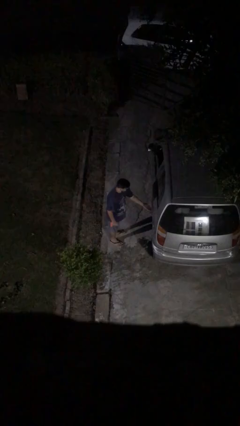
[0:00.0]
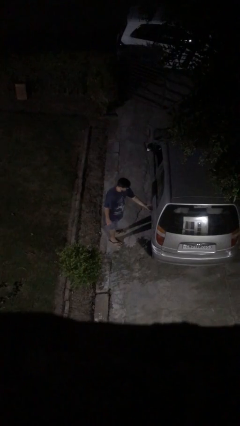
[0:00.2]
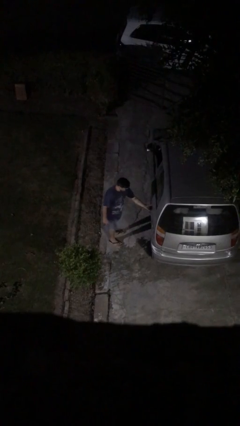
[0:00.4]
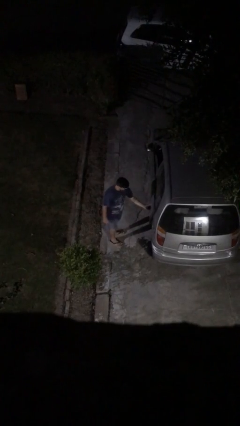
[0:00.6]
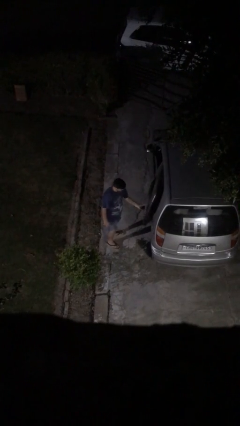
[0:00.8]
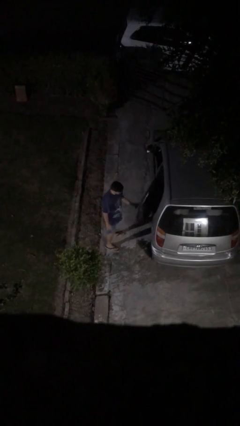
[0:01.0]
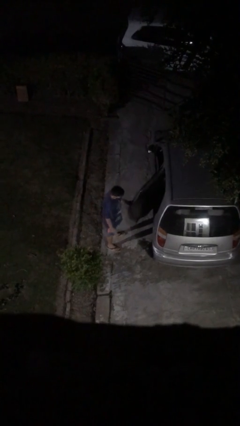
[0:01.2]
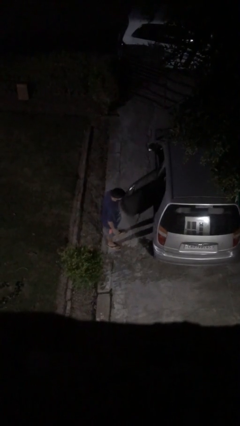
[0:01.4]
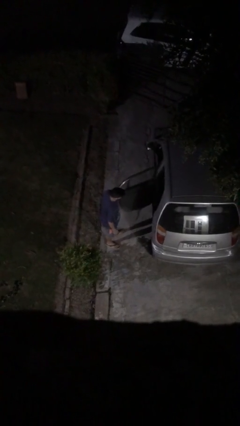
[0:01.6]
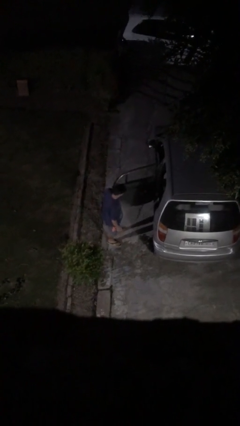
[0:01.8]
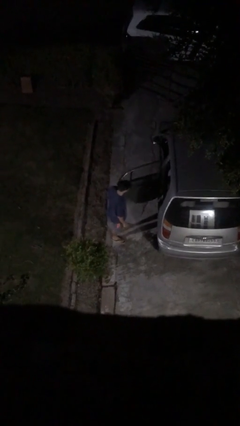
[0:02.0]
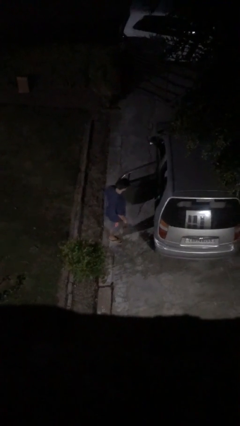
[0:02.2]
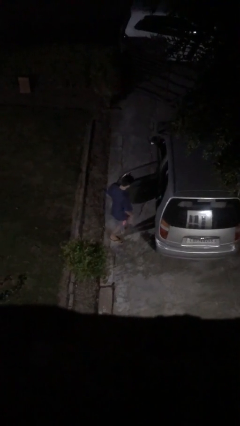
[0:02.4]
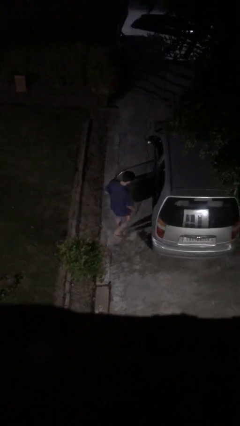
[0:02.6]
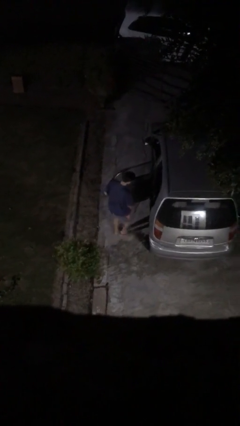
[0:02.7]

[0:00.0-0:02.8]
person opens car door

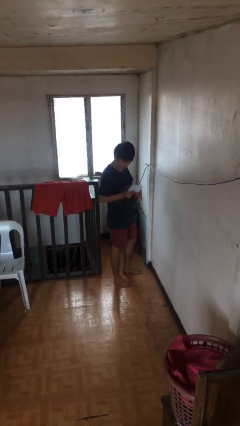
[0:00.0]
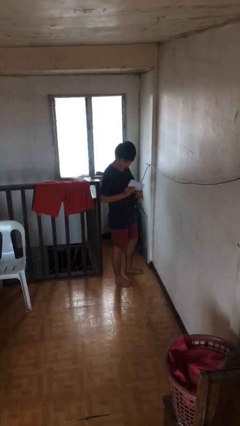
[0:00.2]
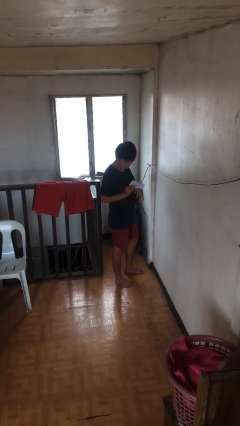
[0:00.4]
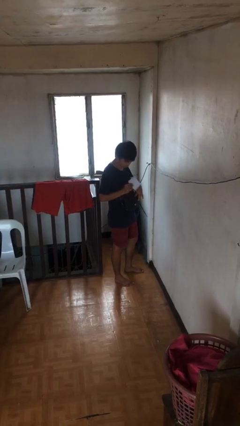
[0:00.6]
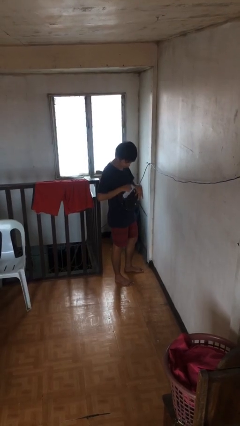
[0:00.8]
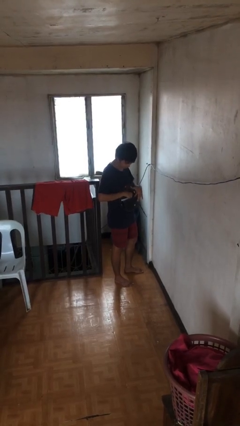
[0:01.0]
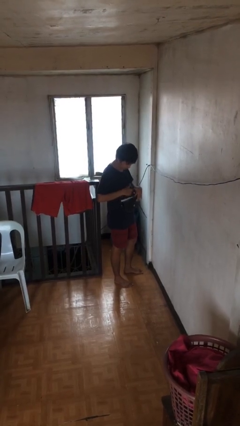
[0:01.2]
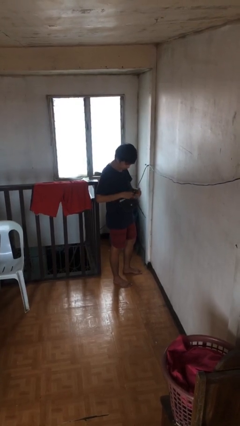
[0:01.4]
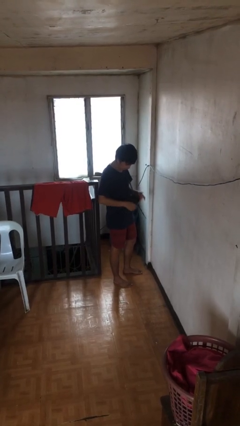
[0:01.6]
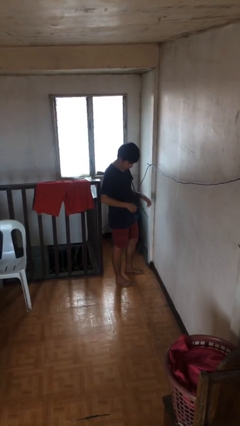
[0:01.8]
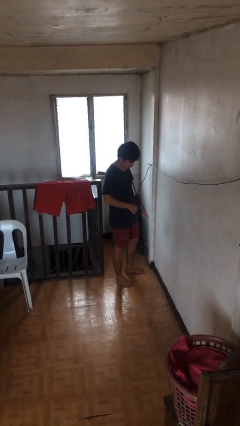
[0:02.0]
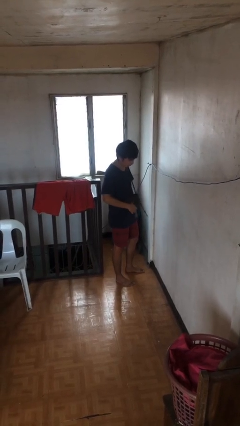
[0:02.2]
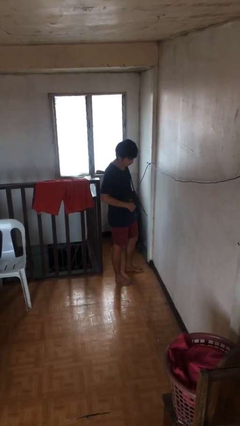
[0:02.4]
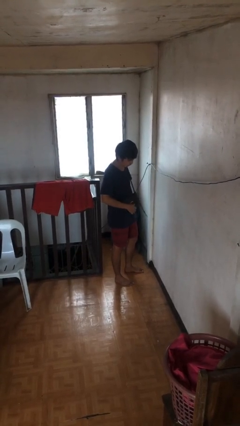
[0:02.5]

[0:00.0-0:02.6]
person puts object into purse

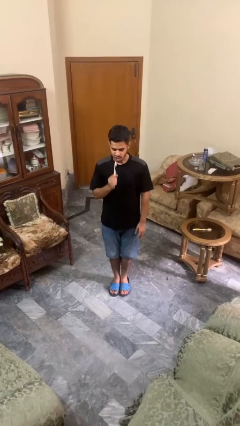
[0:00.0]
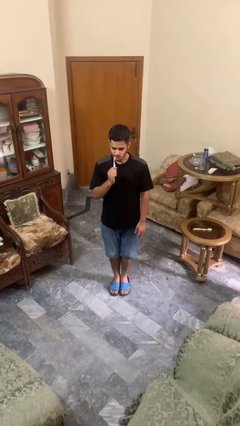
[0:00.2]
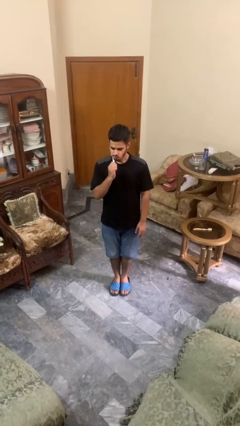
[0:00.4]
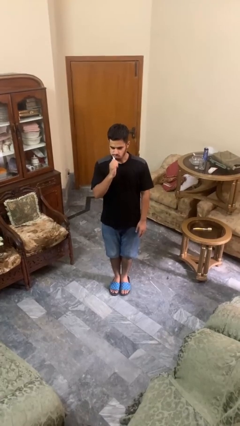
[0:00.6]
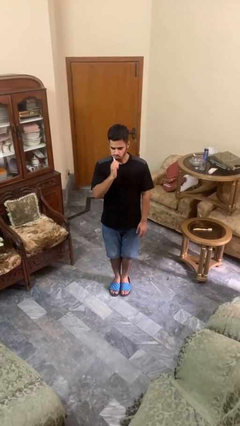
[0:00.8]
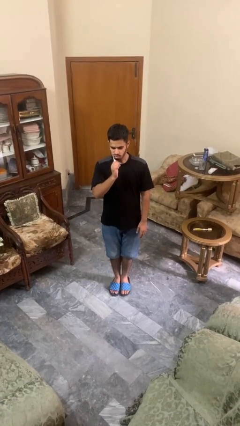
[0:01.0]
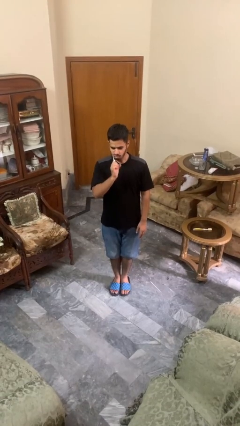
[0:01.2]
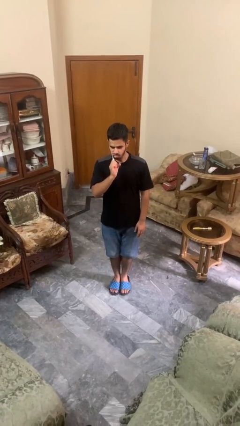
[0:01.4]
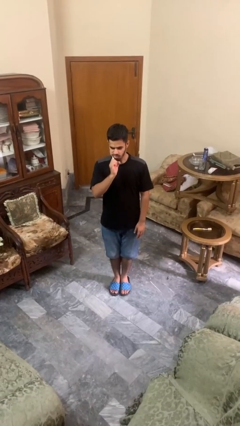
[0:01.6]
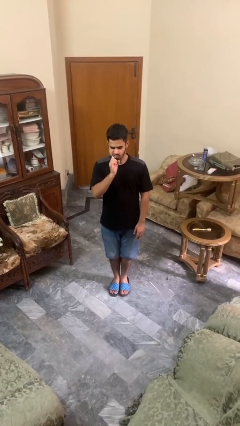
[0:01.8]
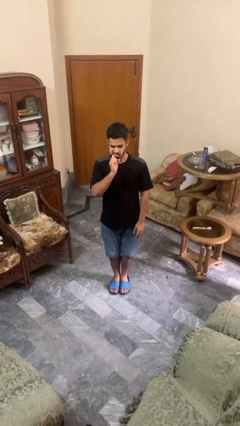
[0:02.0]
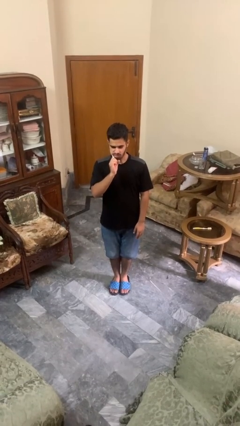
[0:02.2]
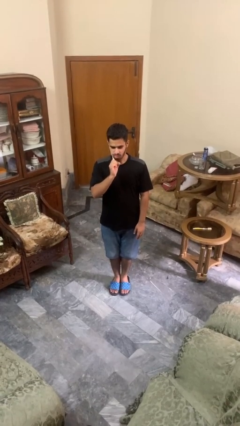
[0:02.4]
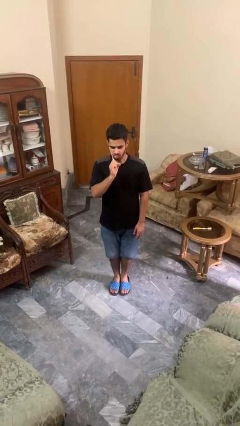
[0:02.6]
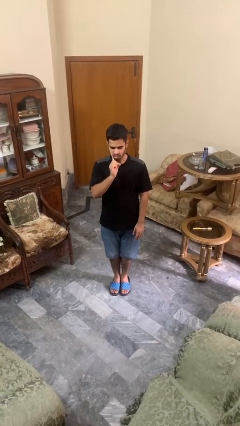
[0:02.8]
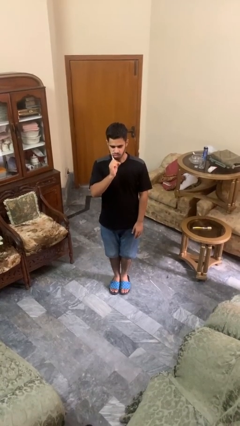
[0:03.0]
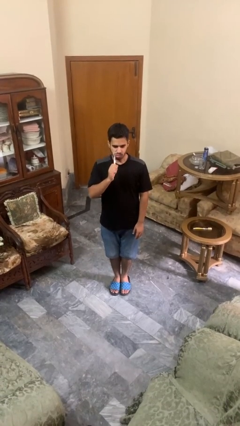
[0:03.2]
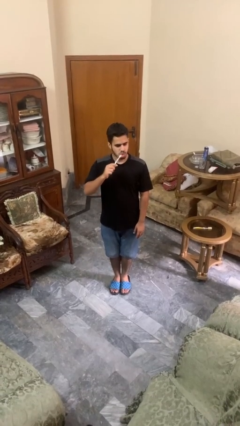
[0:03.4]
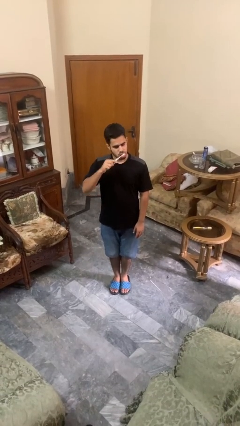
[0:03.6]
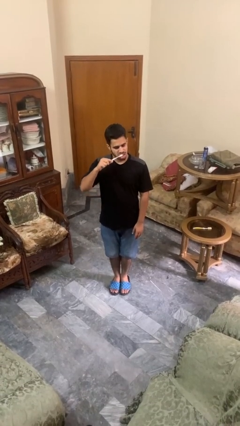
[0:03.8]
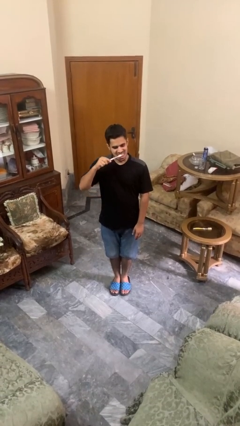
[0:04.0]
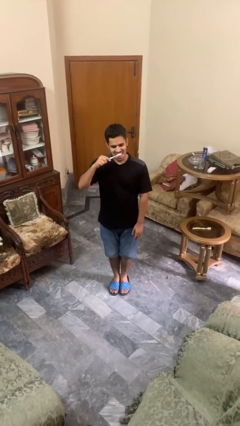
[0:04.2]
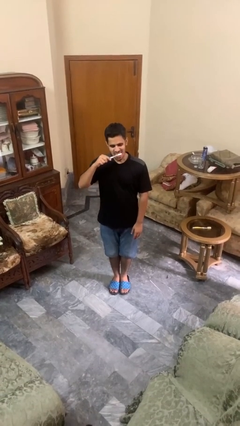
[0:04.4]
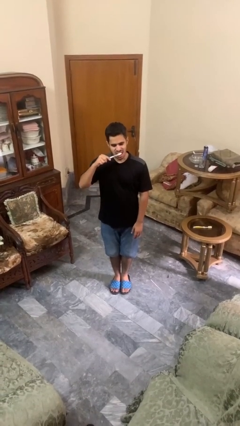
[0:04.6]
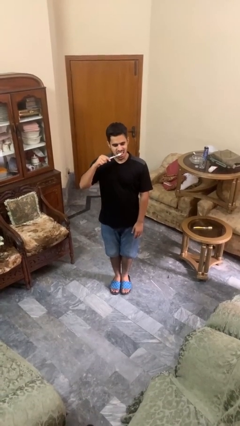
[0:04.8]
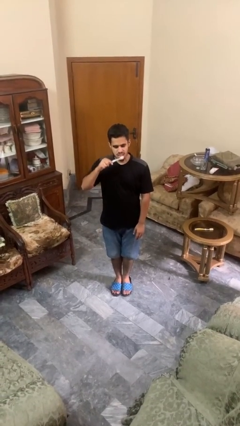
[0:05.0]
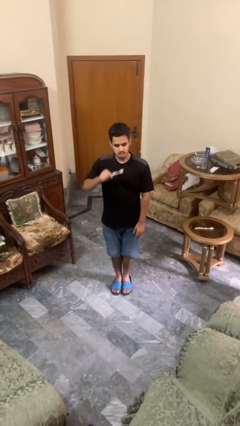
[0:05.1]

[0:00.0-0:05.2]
person brushes teeth

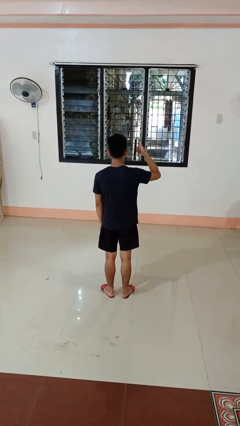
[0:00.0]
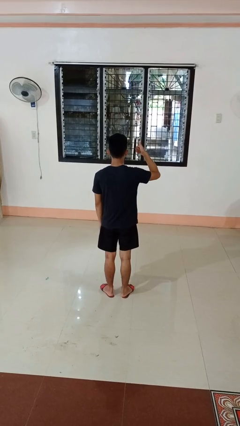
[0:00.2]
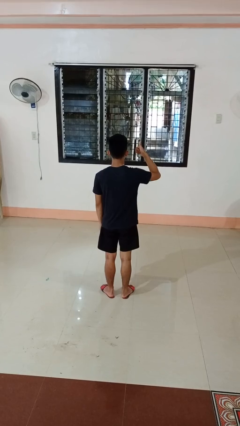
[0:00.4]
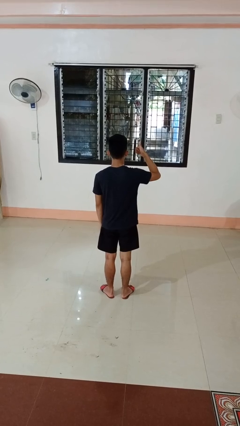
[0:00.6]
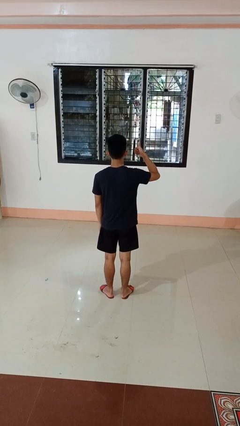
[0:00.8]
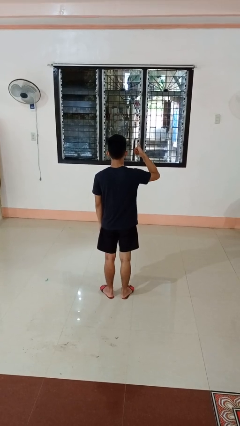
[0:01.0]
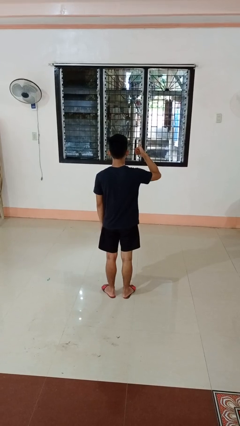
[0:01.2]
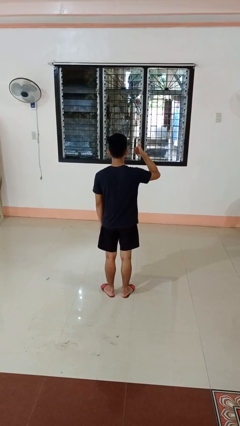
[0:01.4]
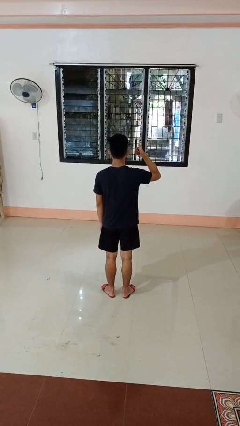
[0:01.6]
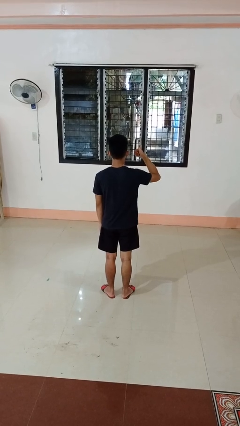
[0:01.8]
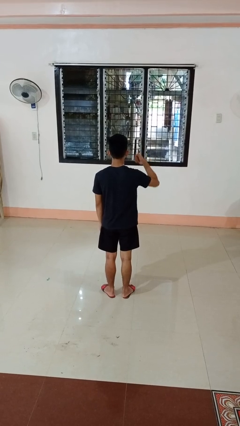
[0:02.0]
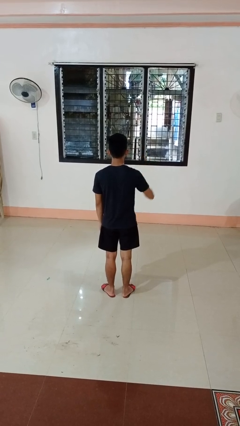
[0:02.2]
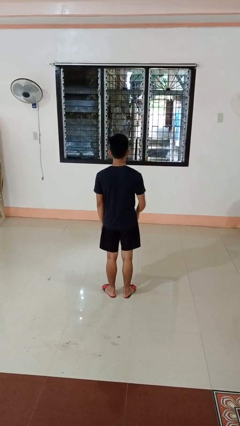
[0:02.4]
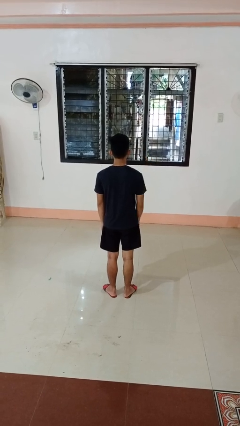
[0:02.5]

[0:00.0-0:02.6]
person gestures thumbs up

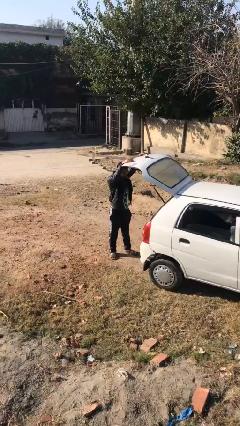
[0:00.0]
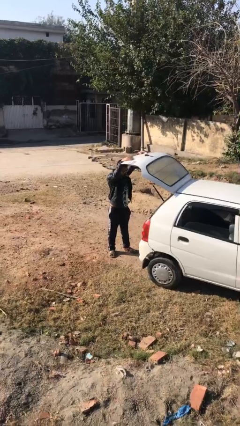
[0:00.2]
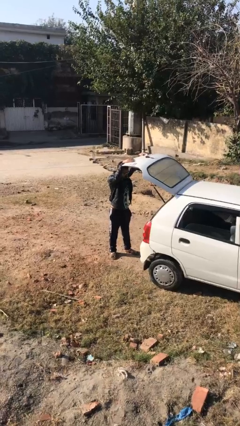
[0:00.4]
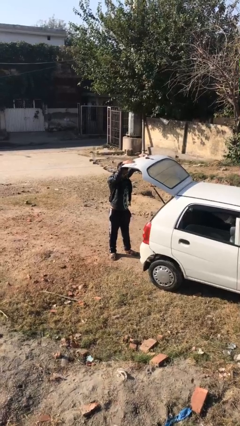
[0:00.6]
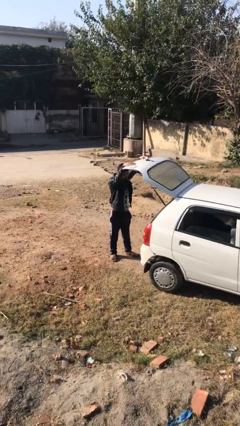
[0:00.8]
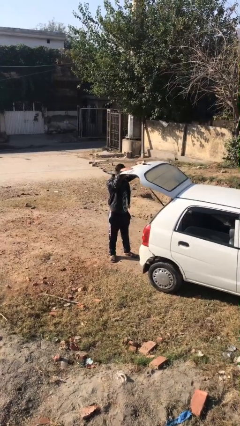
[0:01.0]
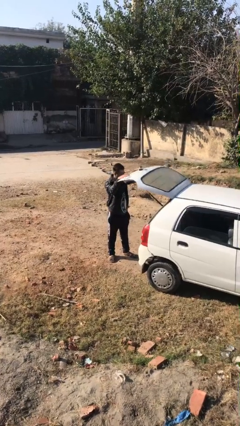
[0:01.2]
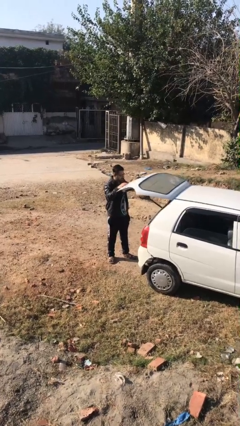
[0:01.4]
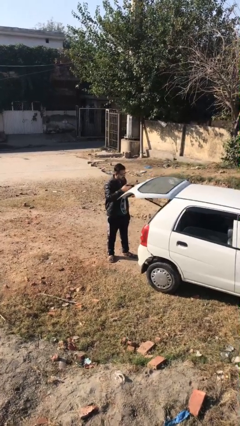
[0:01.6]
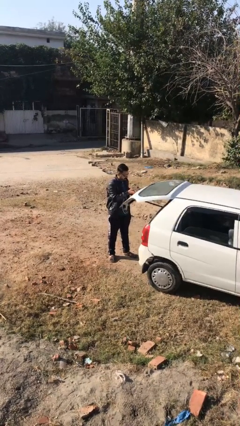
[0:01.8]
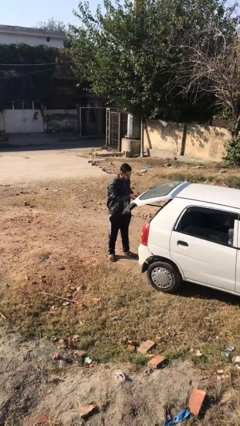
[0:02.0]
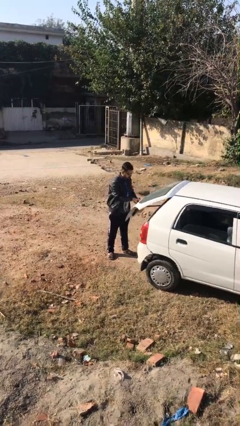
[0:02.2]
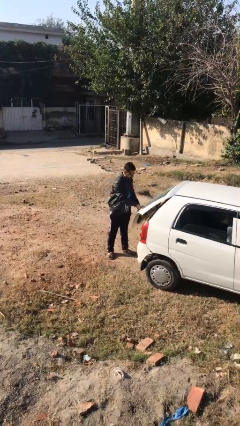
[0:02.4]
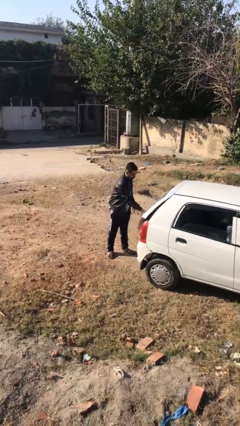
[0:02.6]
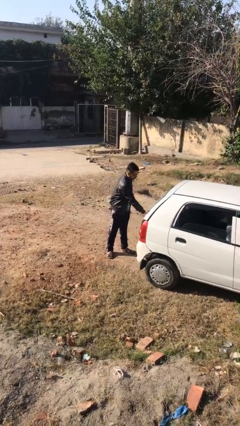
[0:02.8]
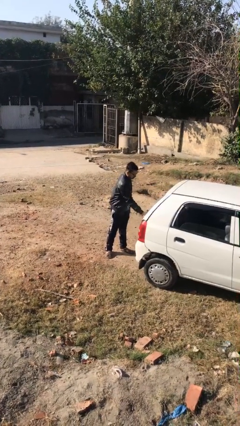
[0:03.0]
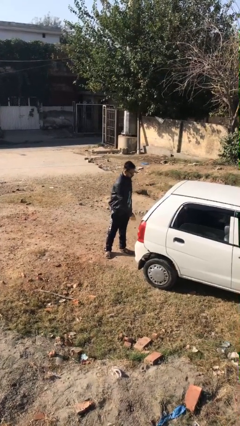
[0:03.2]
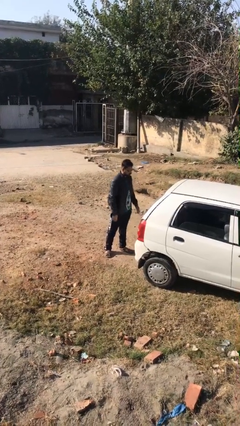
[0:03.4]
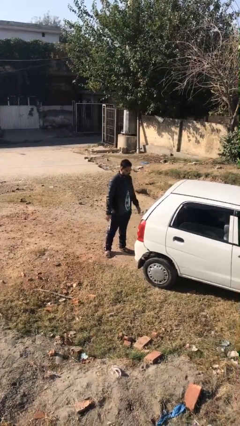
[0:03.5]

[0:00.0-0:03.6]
person closes car trunk

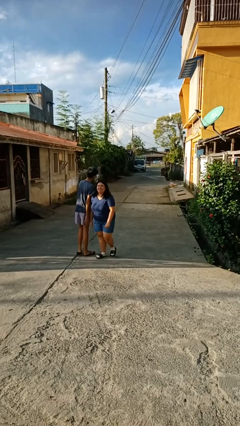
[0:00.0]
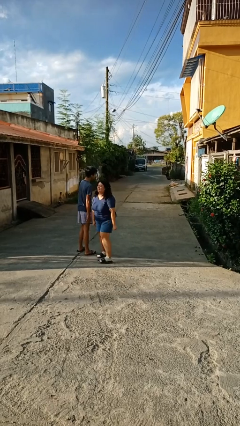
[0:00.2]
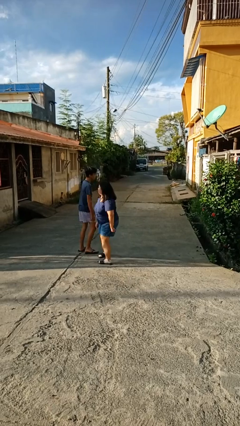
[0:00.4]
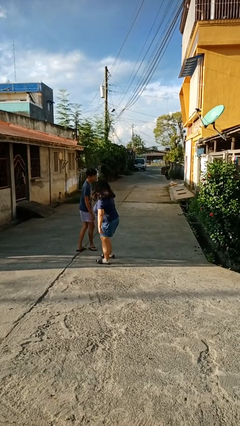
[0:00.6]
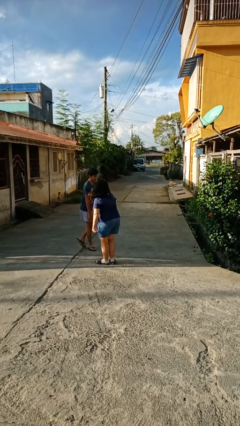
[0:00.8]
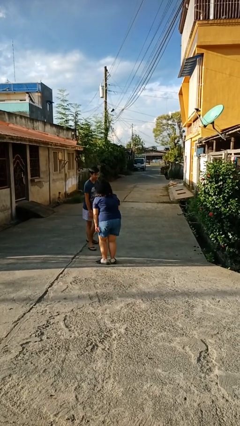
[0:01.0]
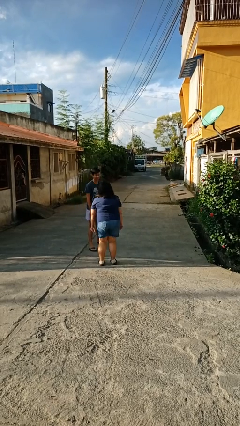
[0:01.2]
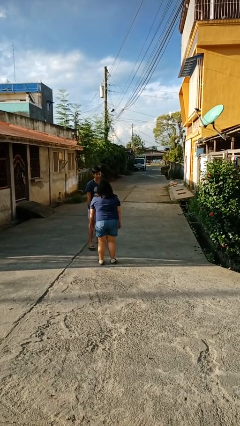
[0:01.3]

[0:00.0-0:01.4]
person bumps into person
